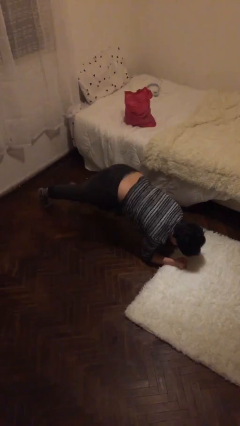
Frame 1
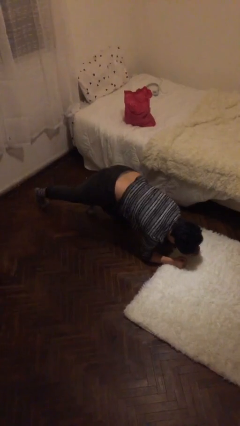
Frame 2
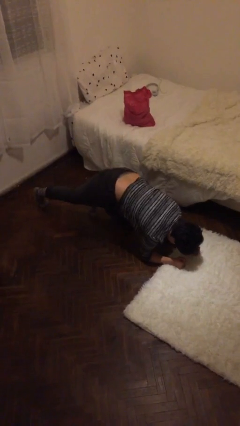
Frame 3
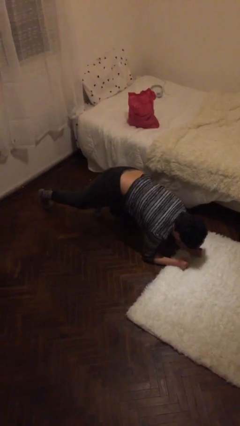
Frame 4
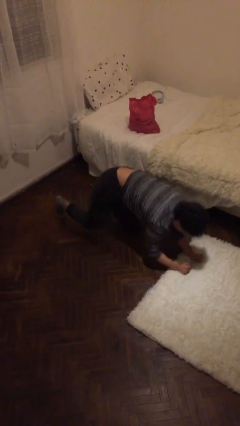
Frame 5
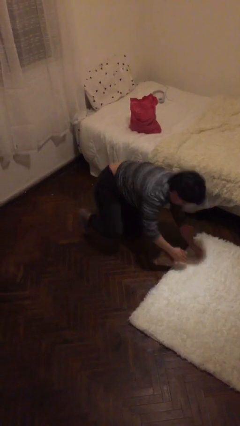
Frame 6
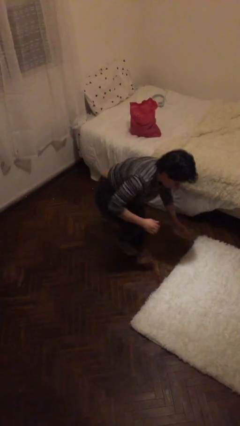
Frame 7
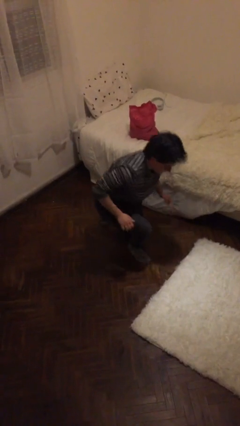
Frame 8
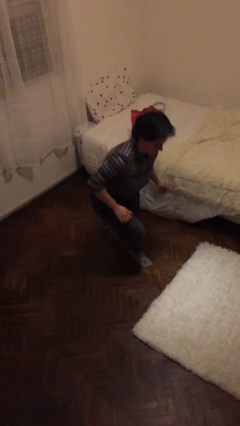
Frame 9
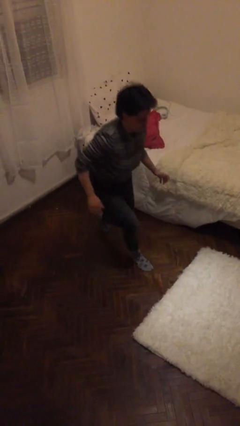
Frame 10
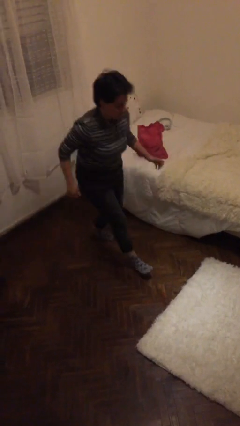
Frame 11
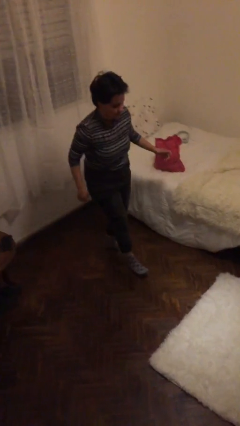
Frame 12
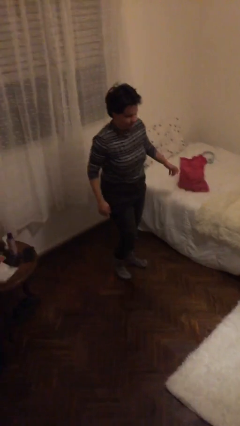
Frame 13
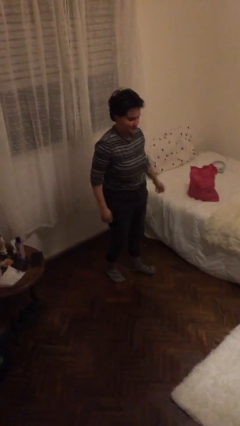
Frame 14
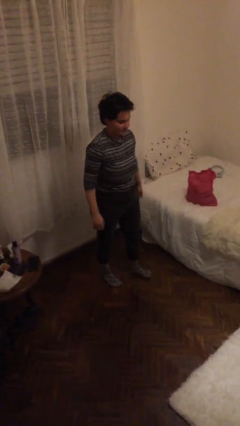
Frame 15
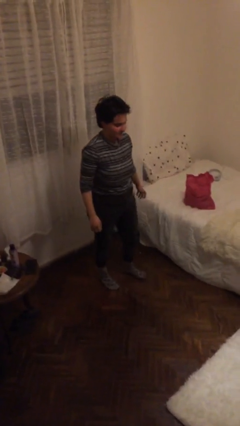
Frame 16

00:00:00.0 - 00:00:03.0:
person stands up from floor

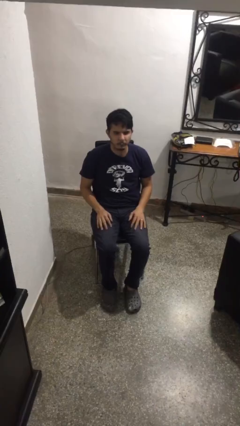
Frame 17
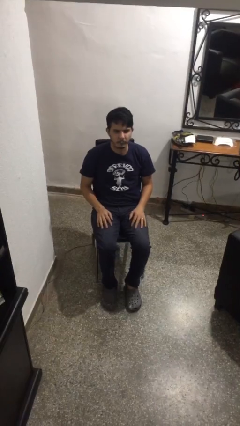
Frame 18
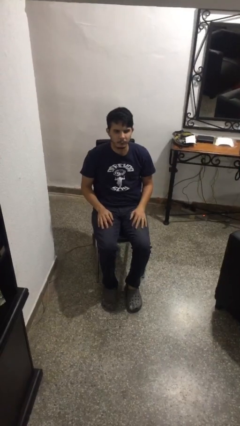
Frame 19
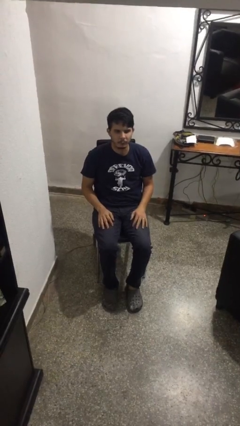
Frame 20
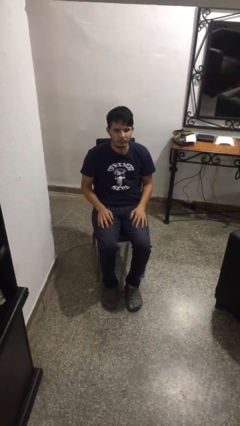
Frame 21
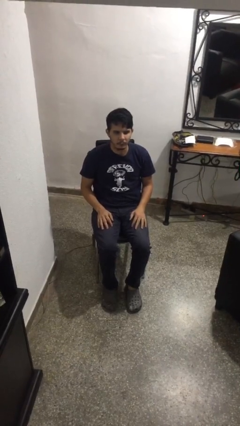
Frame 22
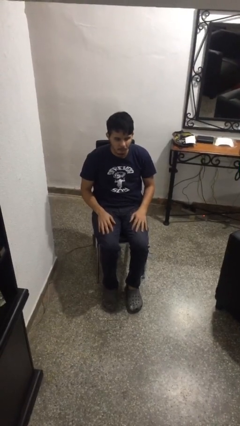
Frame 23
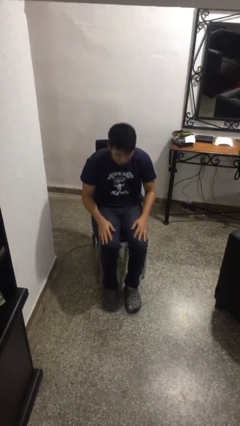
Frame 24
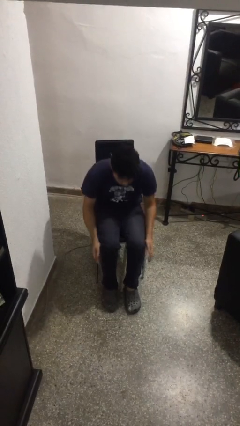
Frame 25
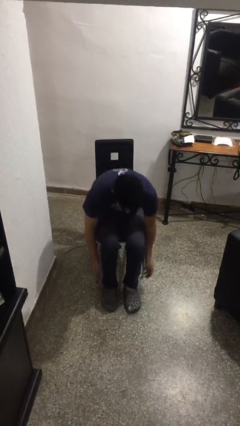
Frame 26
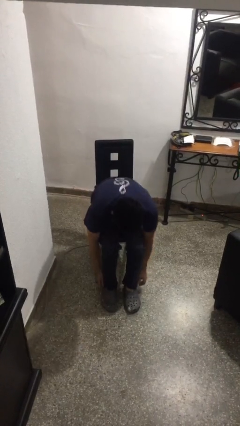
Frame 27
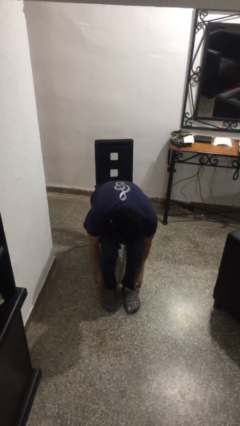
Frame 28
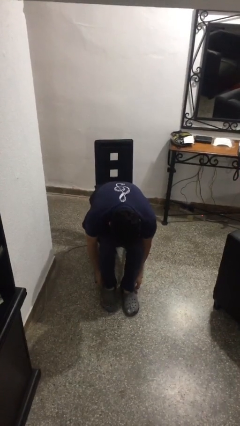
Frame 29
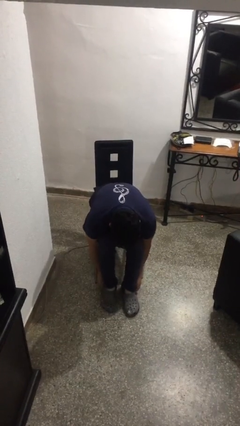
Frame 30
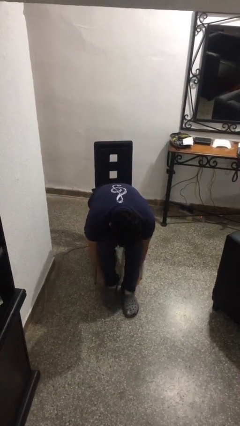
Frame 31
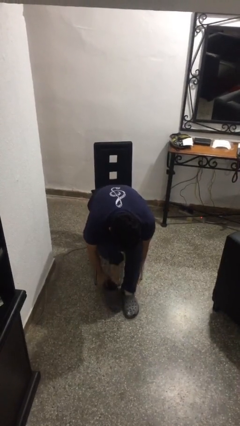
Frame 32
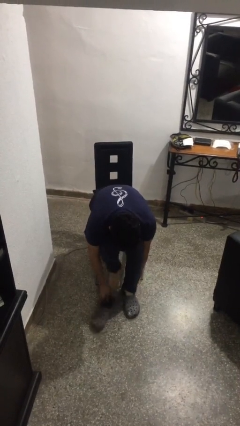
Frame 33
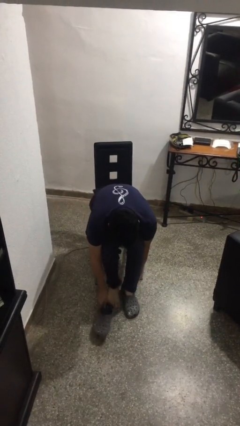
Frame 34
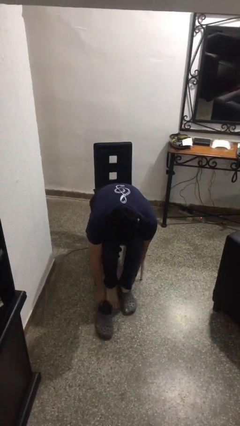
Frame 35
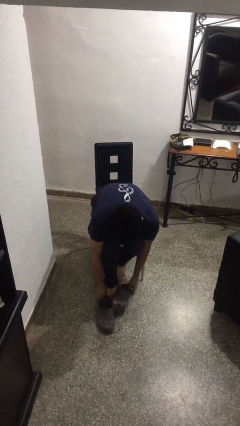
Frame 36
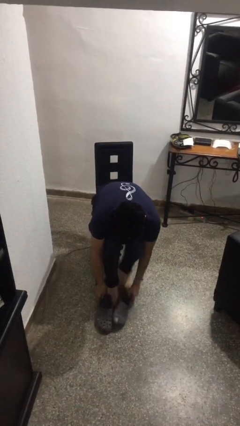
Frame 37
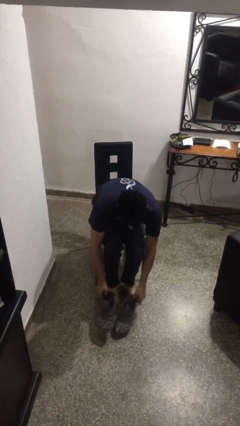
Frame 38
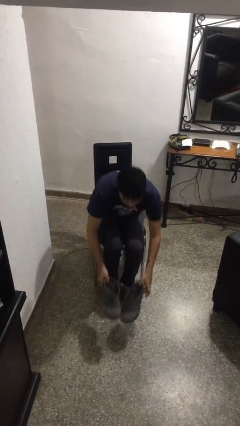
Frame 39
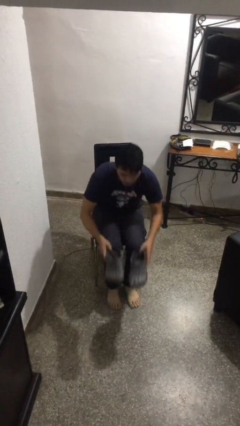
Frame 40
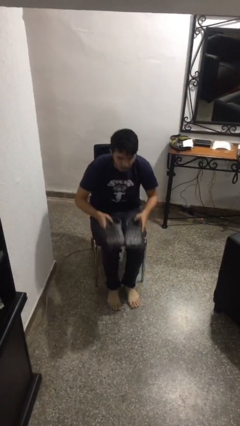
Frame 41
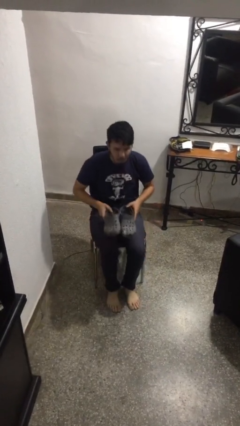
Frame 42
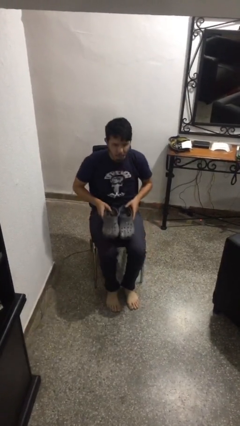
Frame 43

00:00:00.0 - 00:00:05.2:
person takes off shoes

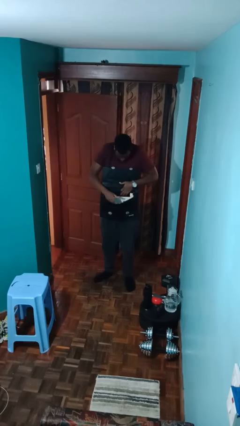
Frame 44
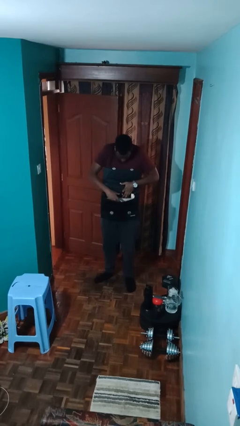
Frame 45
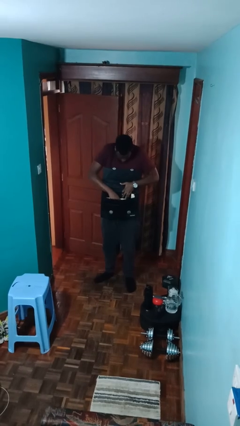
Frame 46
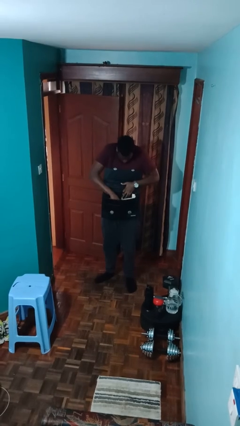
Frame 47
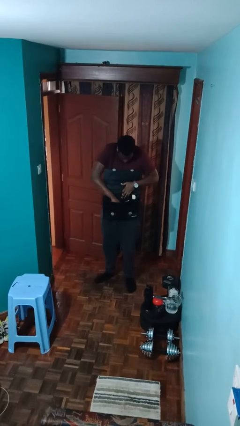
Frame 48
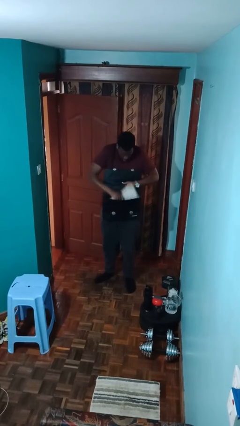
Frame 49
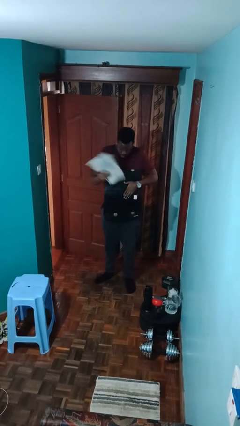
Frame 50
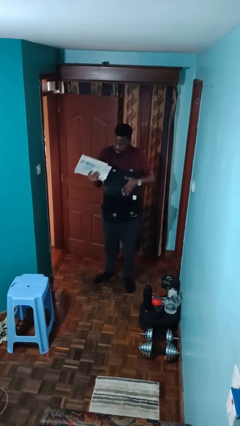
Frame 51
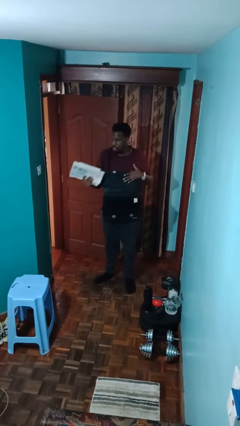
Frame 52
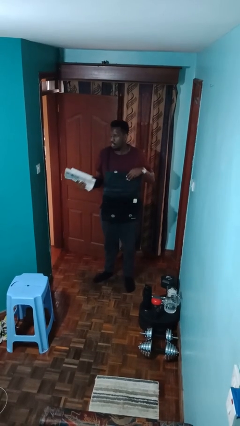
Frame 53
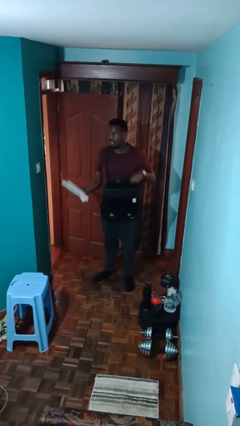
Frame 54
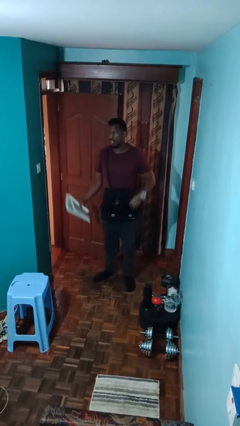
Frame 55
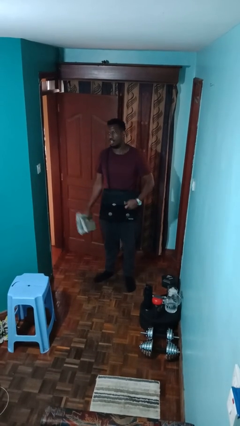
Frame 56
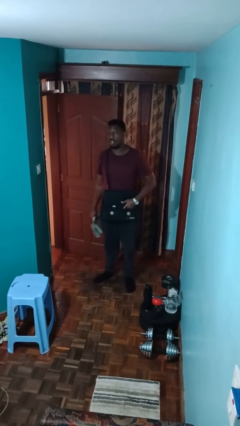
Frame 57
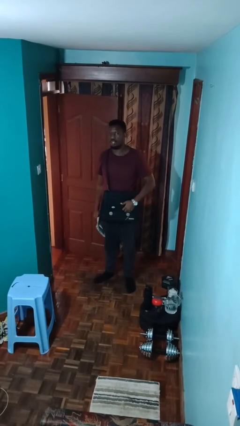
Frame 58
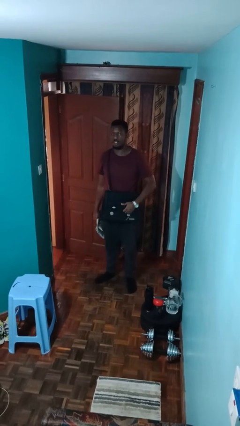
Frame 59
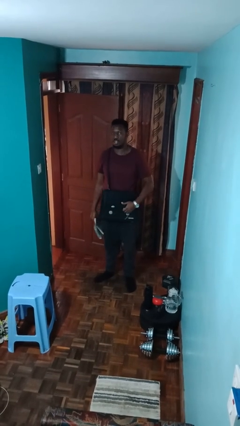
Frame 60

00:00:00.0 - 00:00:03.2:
person takes object from purse

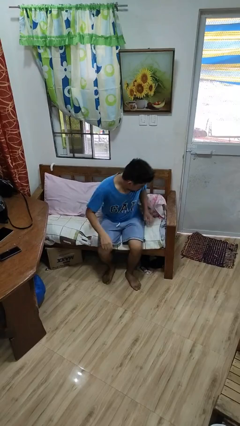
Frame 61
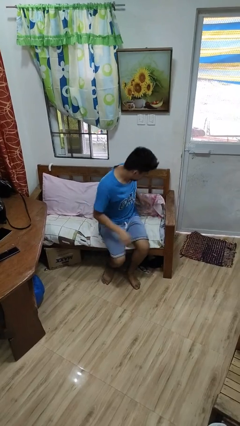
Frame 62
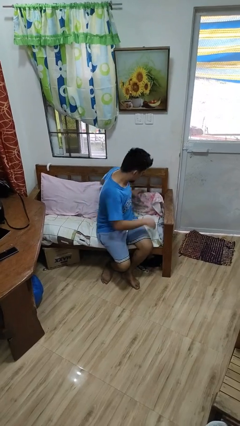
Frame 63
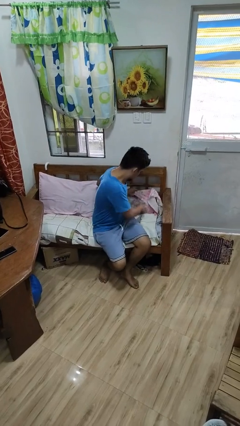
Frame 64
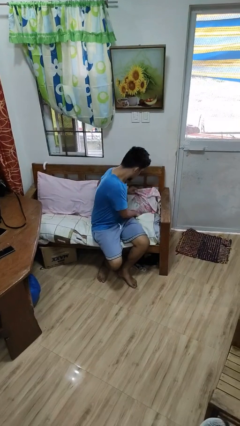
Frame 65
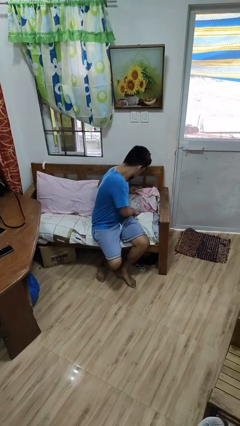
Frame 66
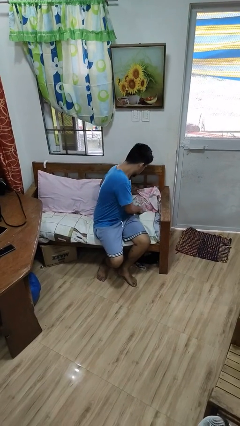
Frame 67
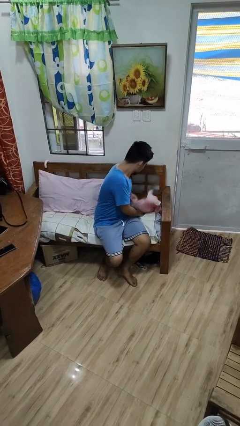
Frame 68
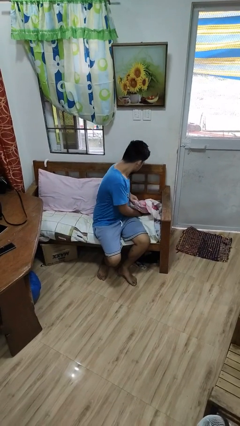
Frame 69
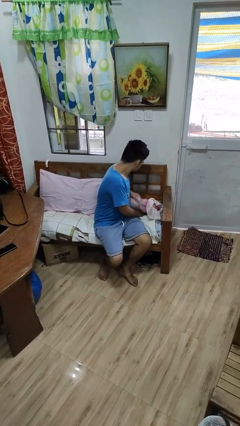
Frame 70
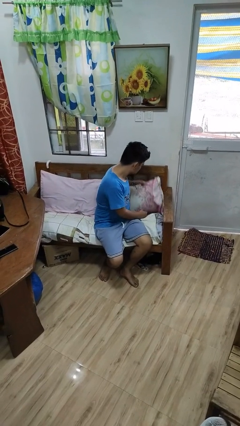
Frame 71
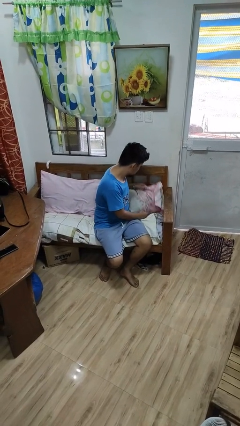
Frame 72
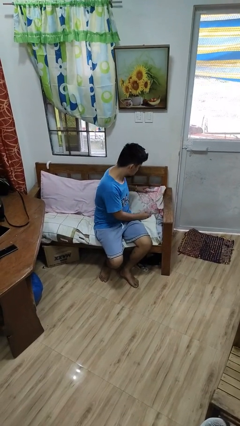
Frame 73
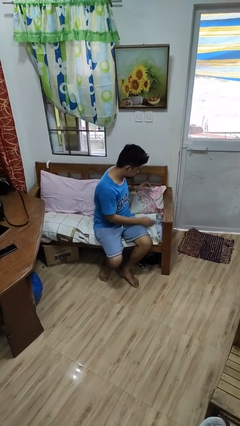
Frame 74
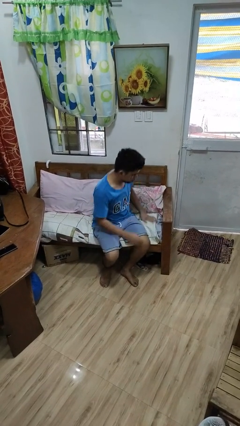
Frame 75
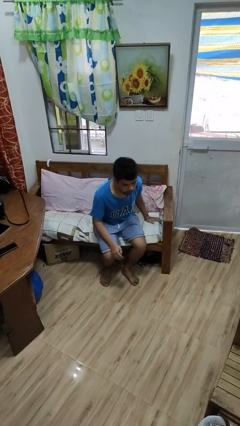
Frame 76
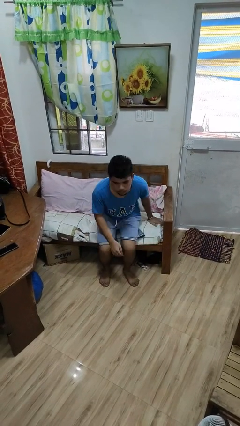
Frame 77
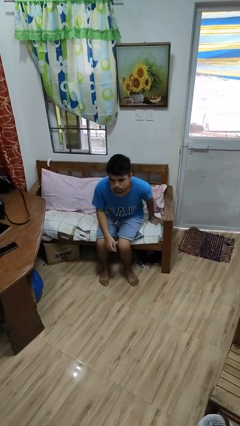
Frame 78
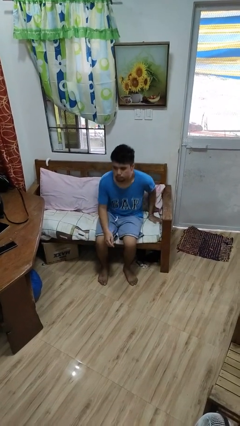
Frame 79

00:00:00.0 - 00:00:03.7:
person searches in couch

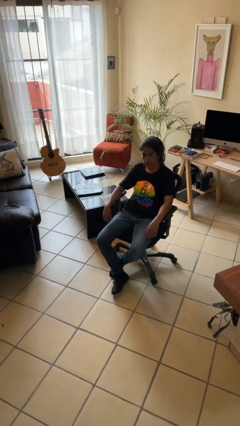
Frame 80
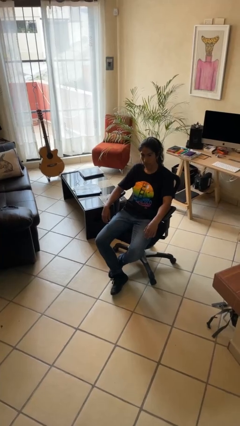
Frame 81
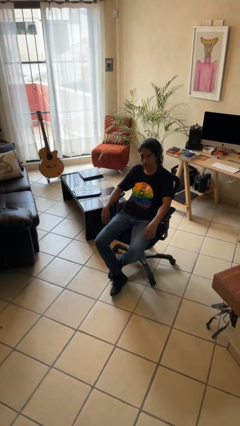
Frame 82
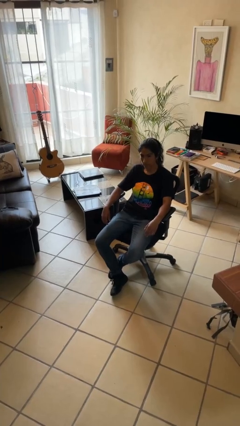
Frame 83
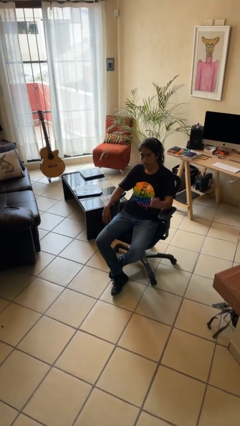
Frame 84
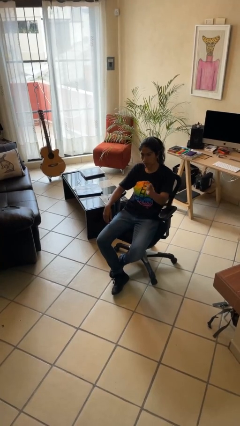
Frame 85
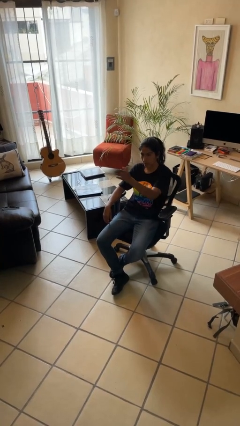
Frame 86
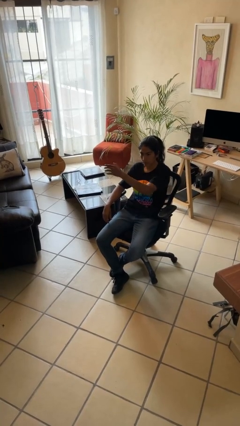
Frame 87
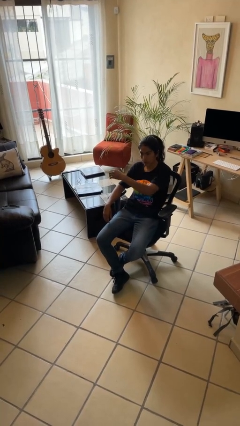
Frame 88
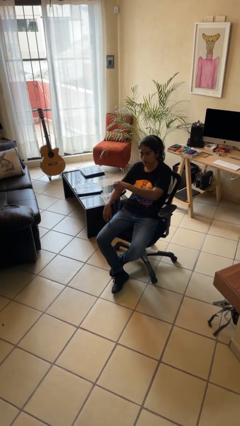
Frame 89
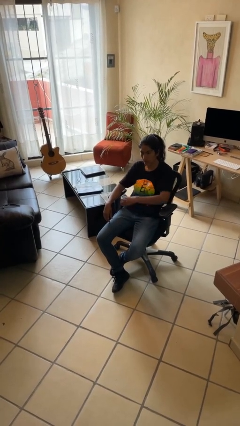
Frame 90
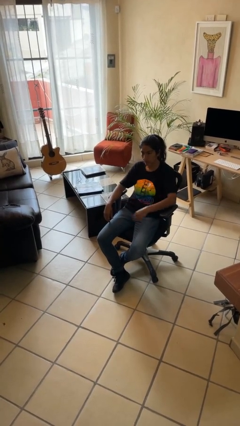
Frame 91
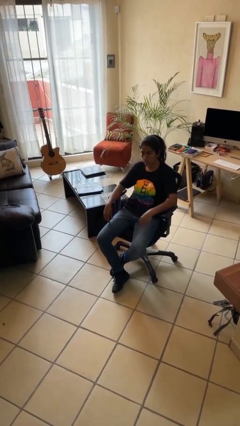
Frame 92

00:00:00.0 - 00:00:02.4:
person gestures swipe right

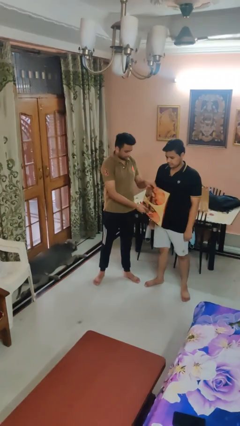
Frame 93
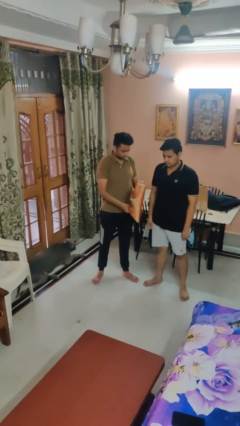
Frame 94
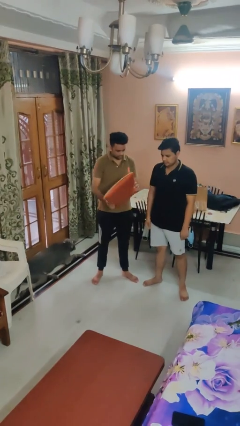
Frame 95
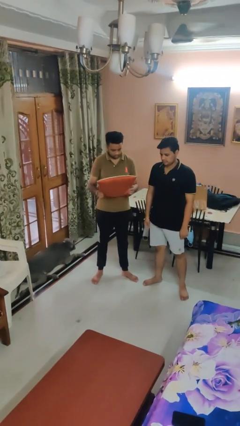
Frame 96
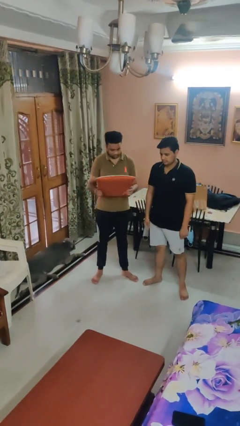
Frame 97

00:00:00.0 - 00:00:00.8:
person hits person with pillow
